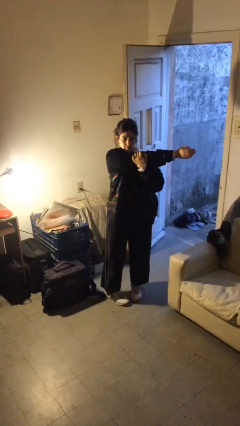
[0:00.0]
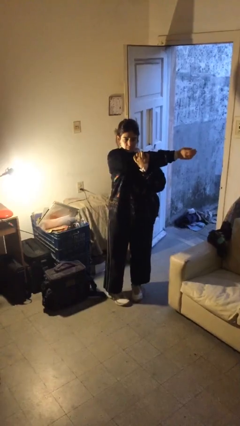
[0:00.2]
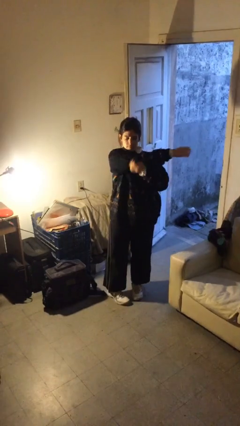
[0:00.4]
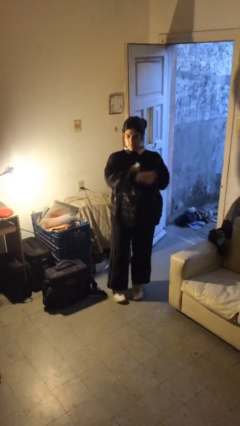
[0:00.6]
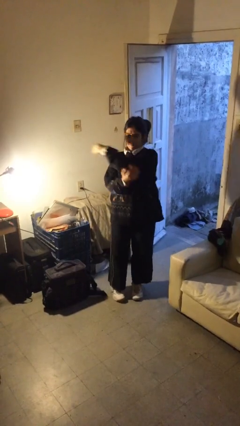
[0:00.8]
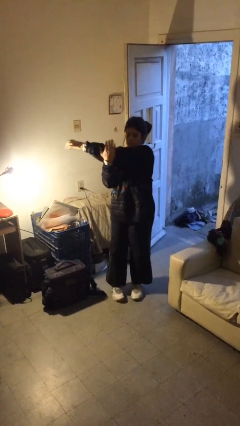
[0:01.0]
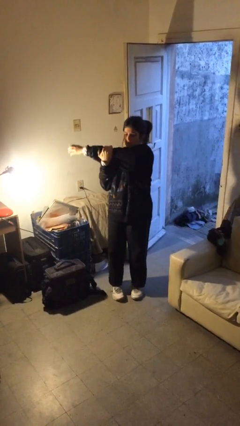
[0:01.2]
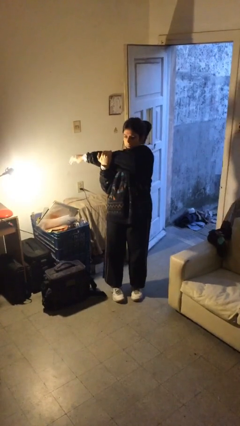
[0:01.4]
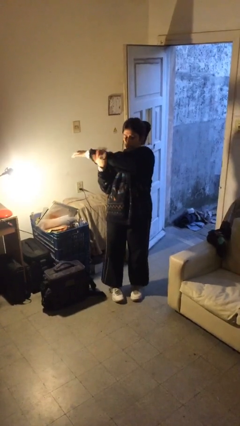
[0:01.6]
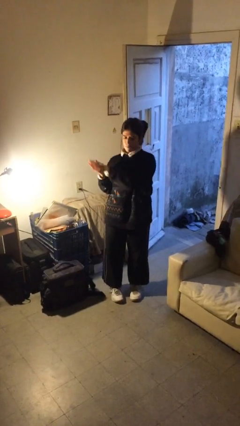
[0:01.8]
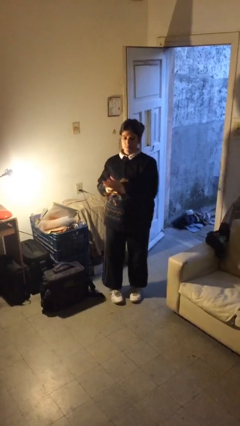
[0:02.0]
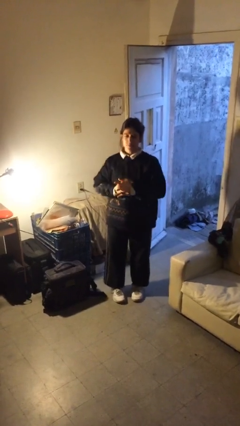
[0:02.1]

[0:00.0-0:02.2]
person stretches arms to side

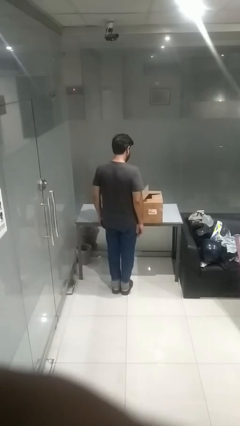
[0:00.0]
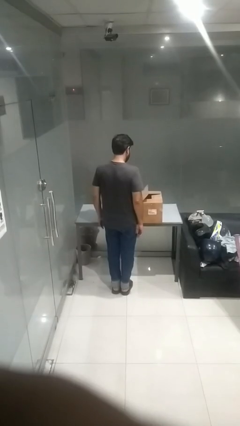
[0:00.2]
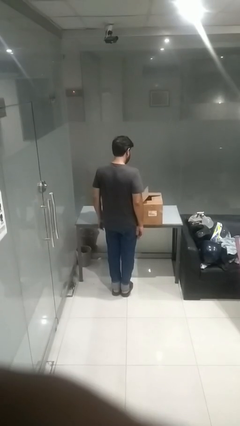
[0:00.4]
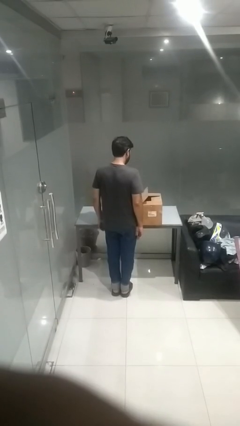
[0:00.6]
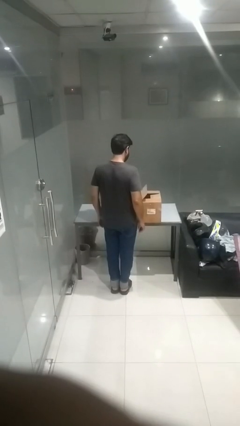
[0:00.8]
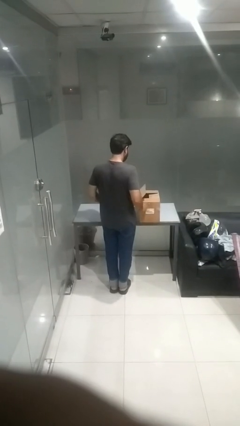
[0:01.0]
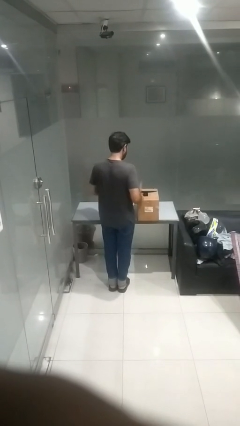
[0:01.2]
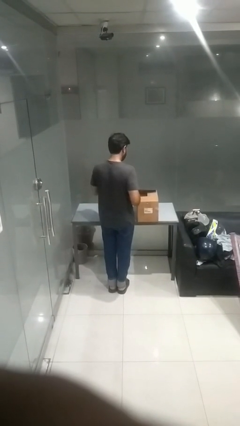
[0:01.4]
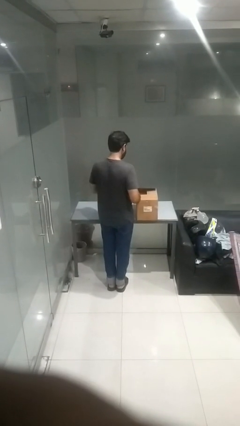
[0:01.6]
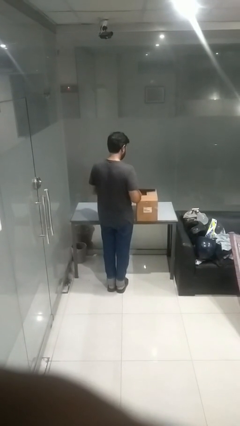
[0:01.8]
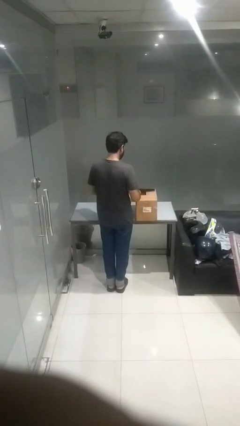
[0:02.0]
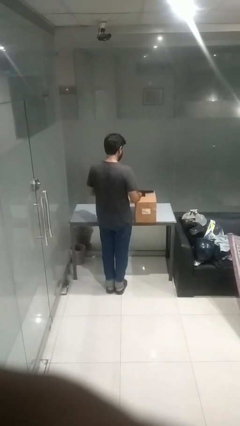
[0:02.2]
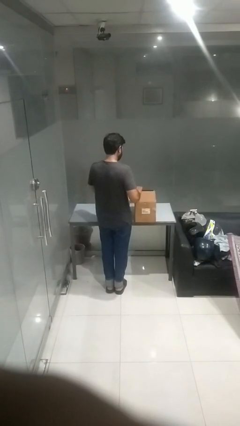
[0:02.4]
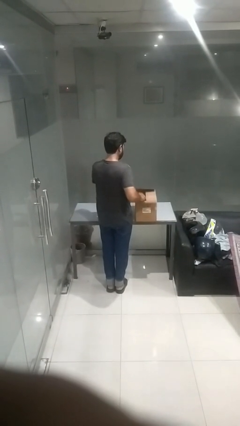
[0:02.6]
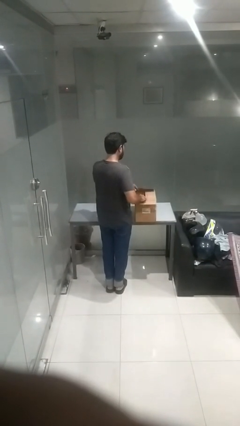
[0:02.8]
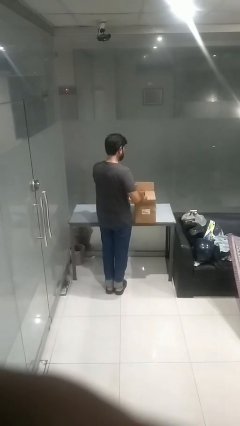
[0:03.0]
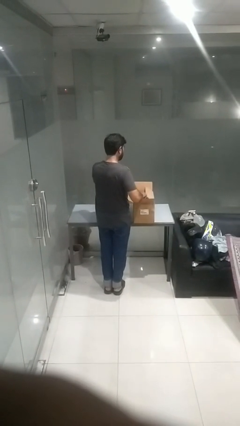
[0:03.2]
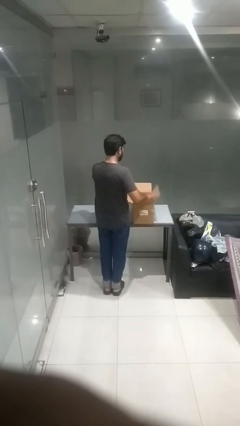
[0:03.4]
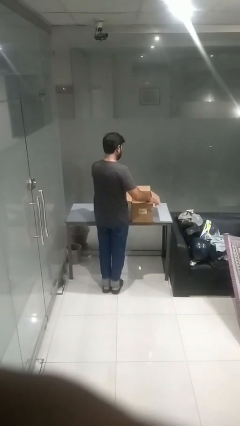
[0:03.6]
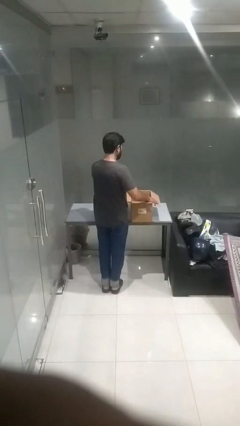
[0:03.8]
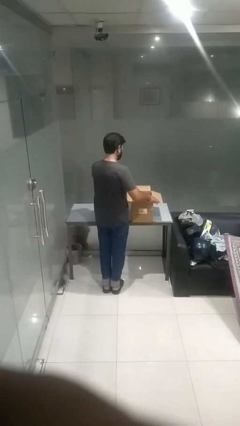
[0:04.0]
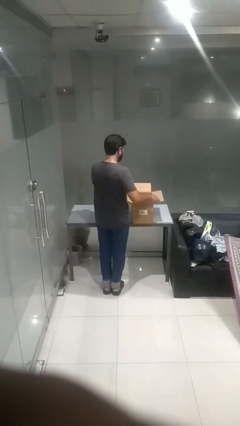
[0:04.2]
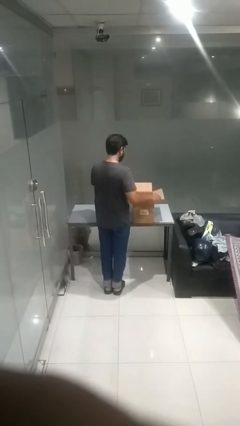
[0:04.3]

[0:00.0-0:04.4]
person opens box

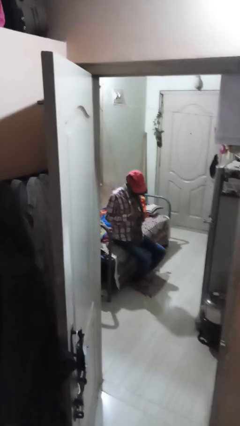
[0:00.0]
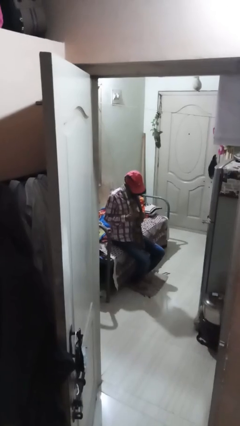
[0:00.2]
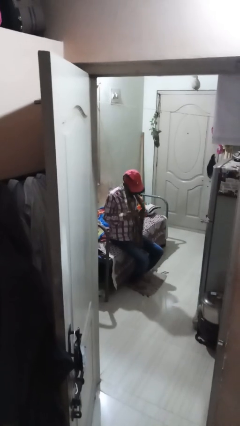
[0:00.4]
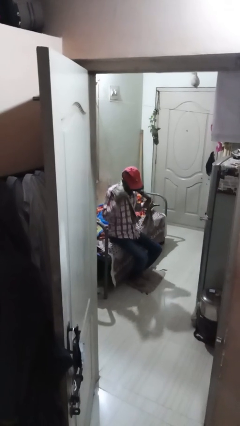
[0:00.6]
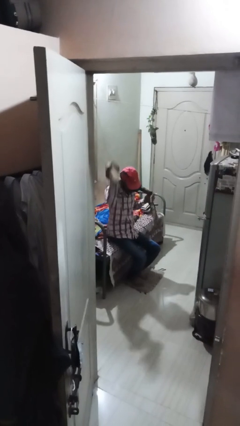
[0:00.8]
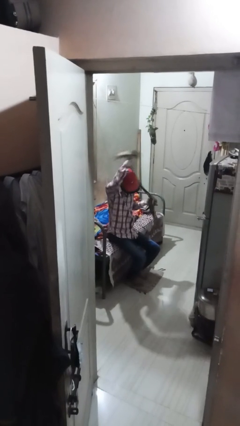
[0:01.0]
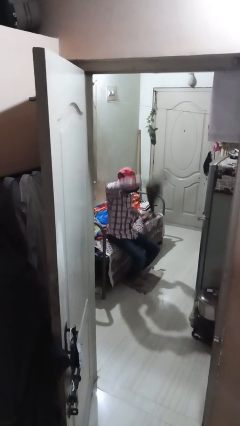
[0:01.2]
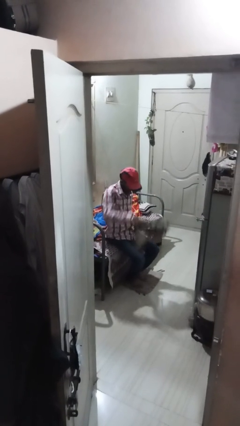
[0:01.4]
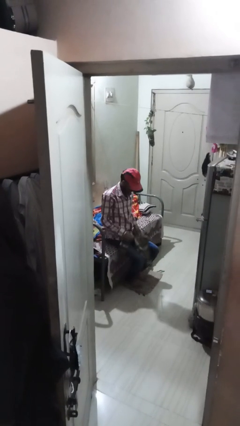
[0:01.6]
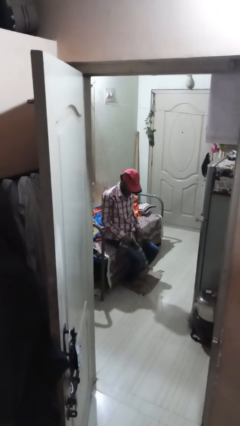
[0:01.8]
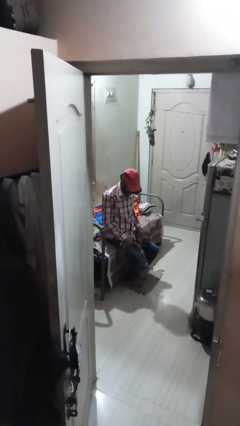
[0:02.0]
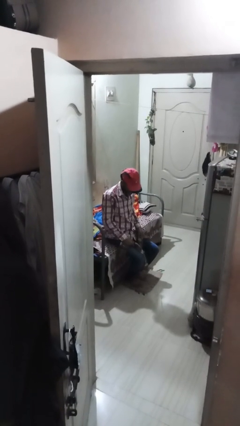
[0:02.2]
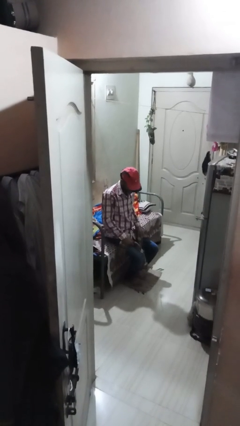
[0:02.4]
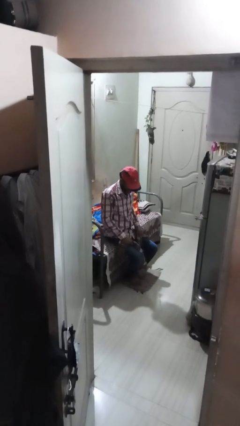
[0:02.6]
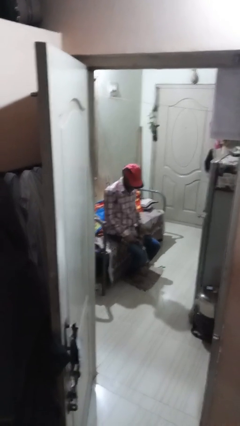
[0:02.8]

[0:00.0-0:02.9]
person takes off scarf

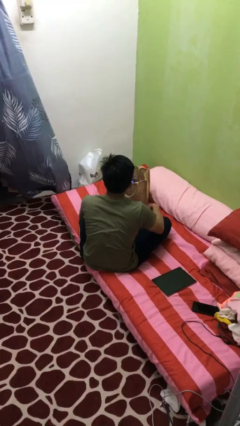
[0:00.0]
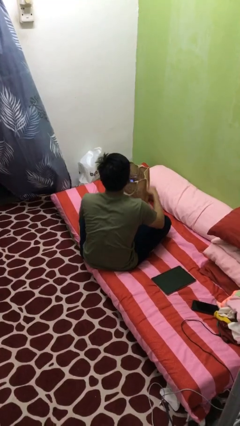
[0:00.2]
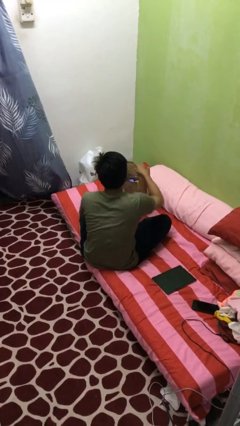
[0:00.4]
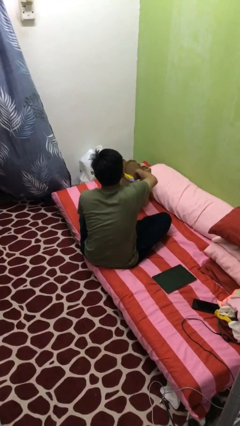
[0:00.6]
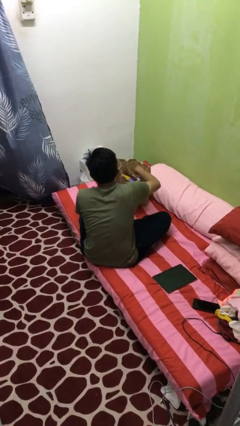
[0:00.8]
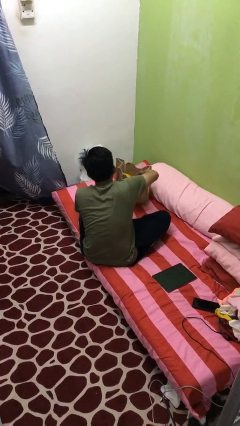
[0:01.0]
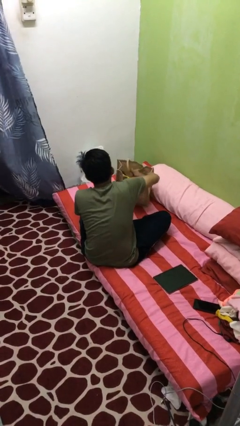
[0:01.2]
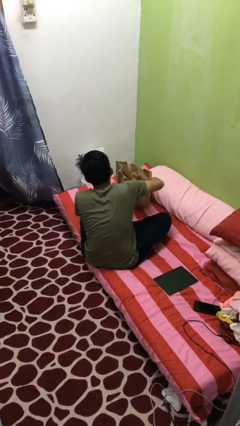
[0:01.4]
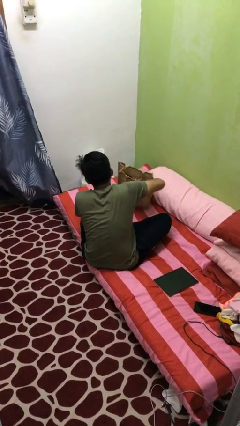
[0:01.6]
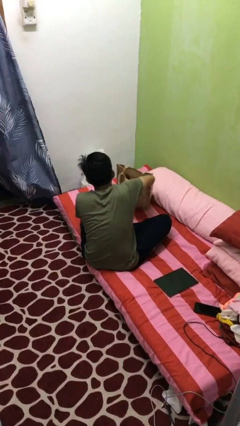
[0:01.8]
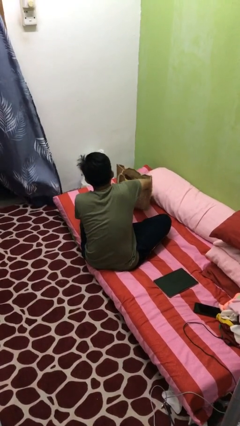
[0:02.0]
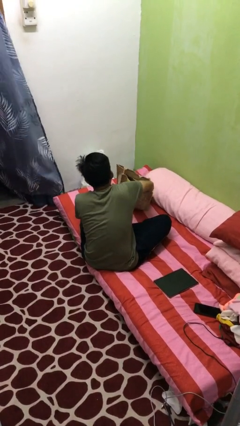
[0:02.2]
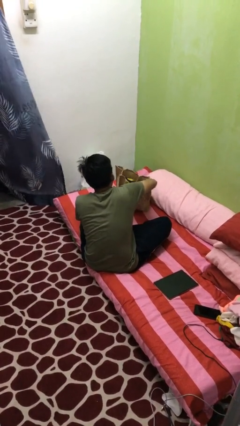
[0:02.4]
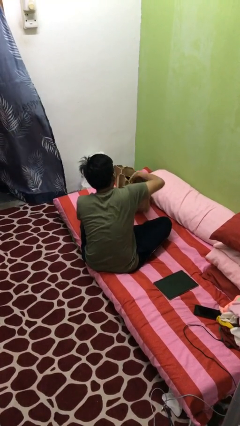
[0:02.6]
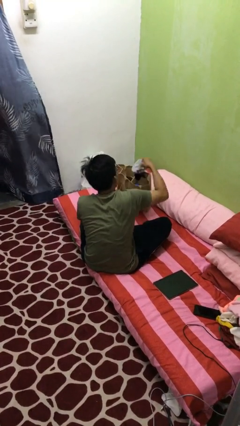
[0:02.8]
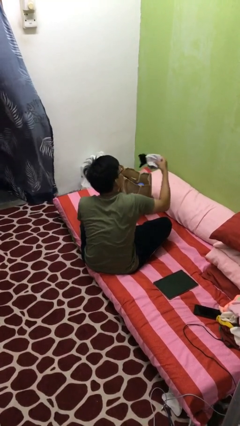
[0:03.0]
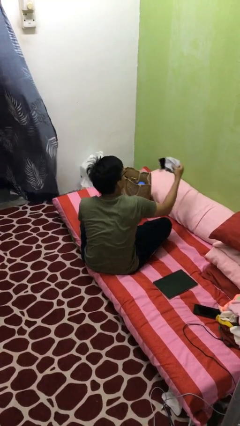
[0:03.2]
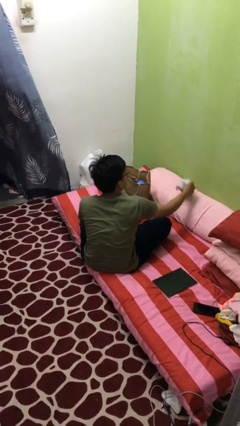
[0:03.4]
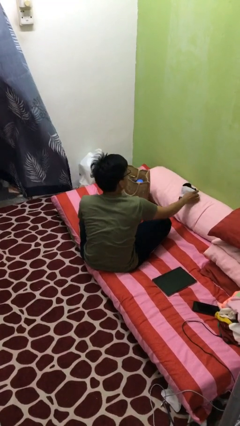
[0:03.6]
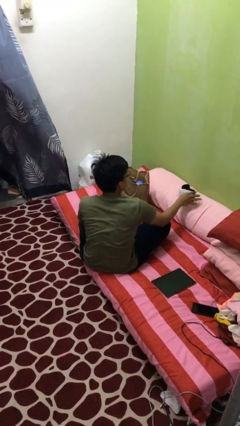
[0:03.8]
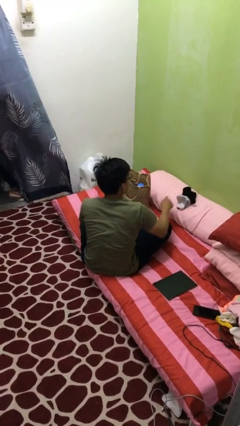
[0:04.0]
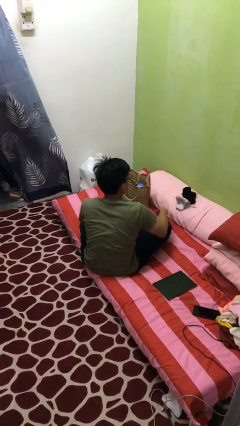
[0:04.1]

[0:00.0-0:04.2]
person takes object from bag

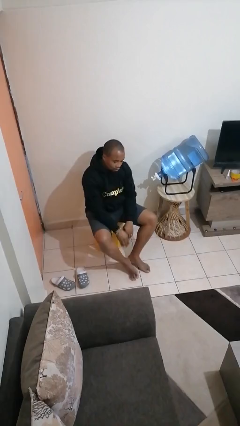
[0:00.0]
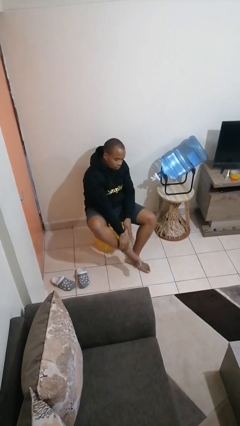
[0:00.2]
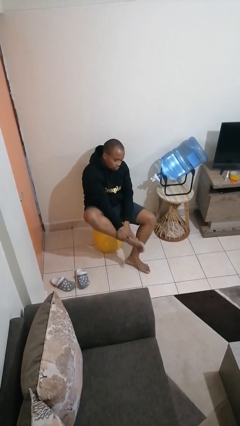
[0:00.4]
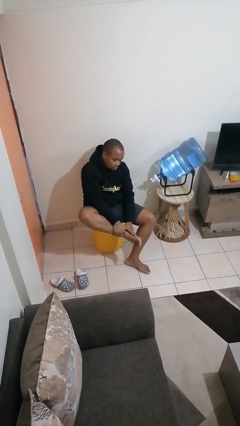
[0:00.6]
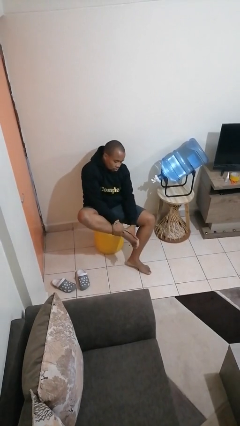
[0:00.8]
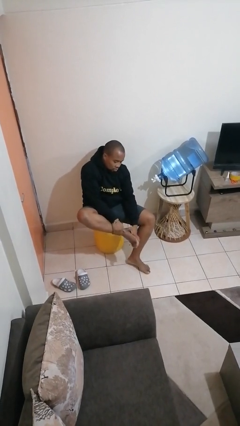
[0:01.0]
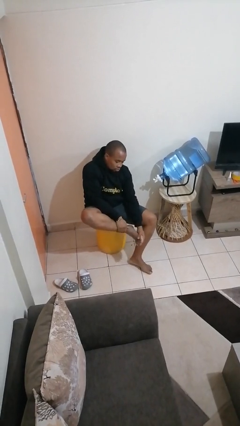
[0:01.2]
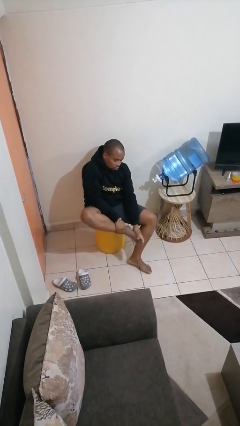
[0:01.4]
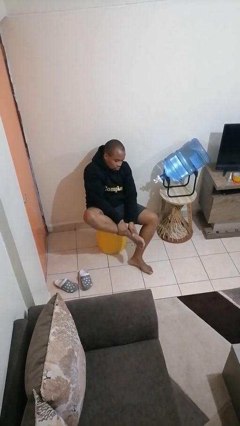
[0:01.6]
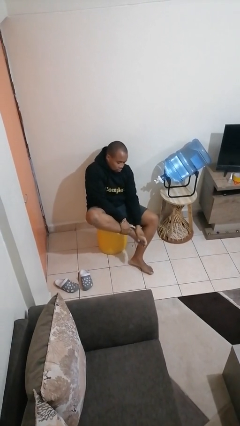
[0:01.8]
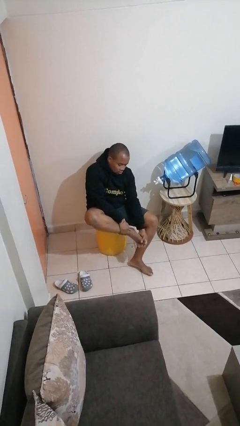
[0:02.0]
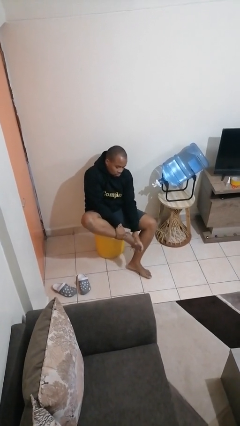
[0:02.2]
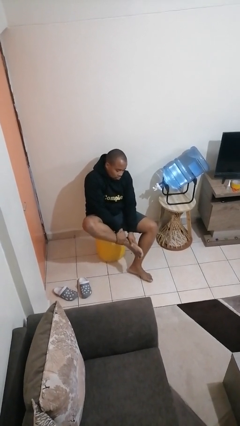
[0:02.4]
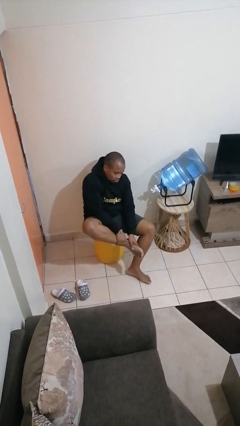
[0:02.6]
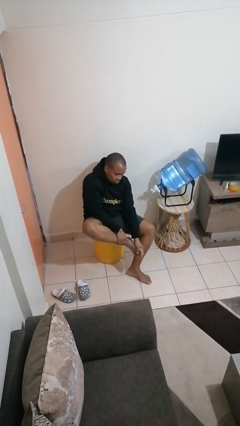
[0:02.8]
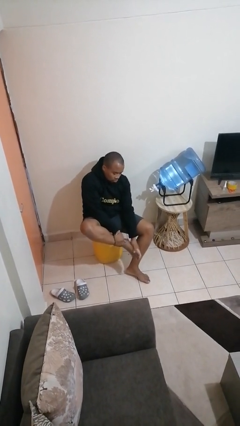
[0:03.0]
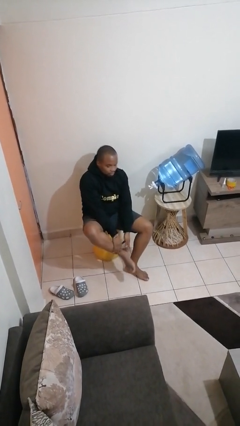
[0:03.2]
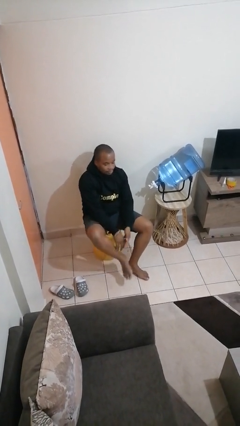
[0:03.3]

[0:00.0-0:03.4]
person rubs foot

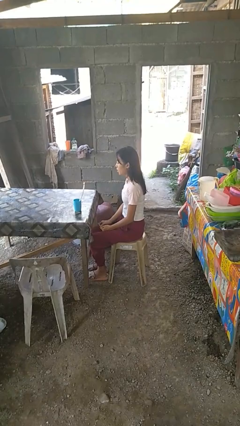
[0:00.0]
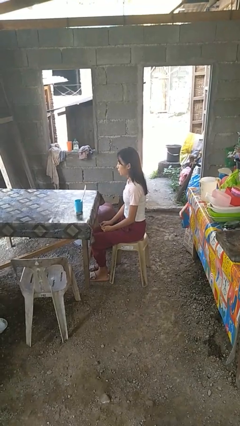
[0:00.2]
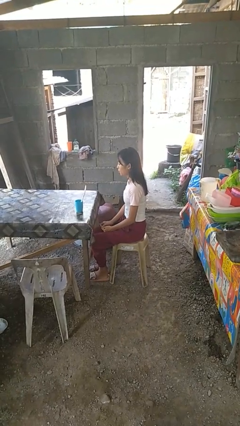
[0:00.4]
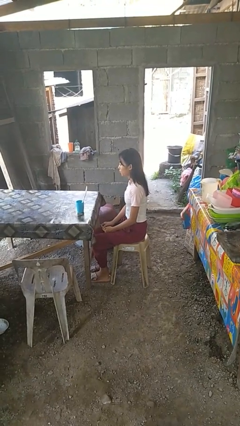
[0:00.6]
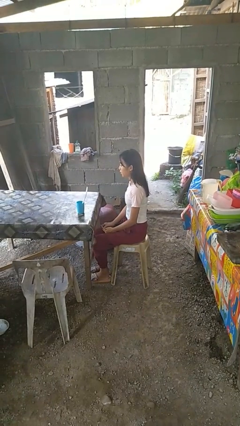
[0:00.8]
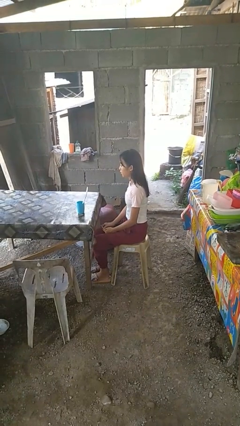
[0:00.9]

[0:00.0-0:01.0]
person extinguishes candle
